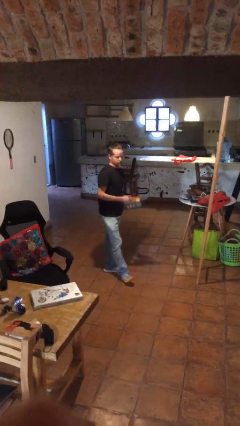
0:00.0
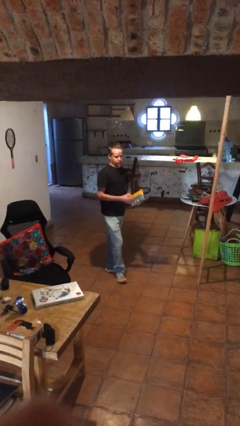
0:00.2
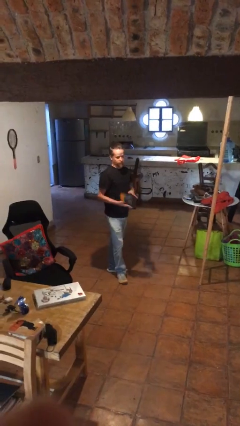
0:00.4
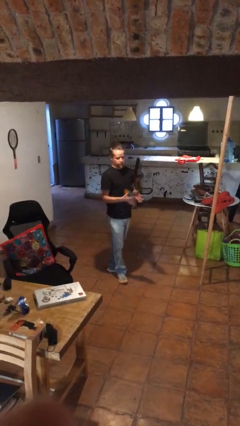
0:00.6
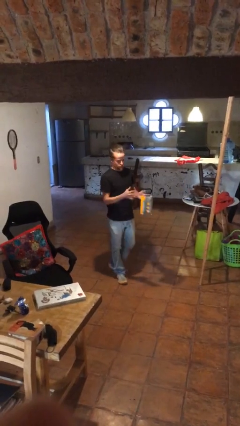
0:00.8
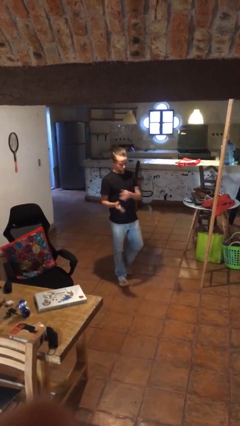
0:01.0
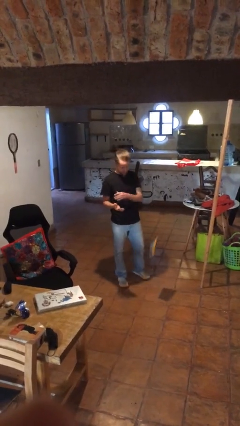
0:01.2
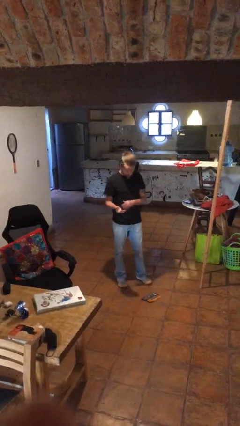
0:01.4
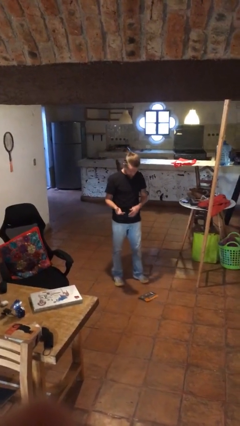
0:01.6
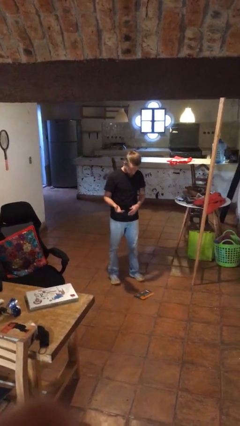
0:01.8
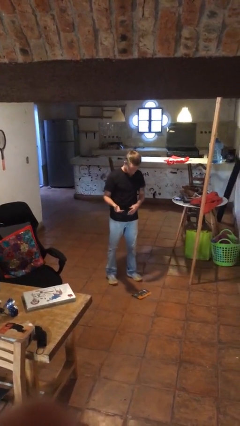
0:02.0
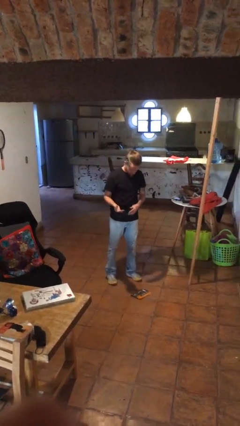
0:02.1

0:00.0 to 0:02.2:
person drops object

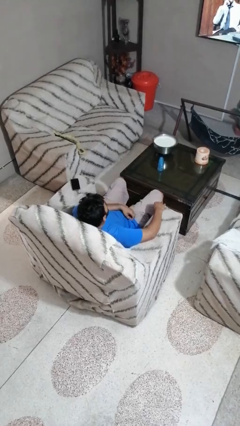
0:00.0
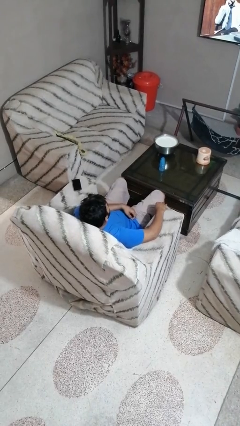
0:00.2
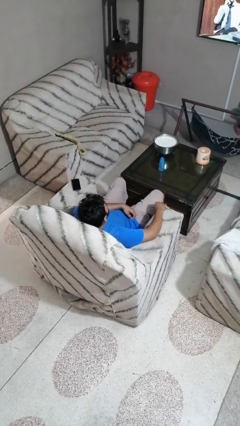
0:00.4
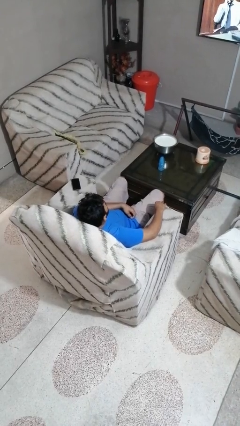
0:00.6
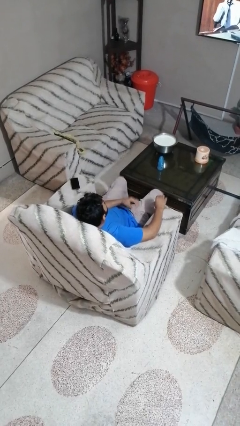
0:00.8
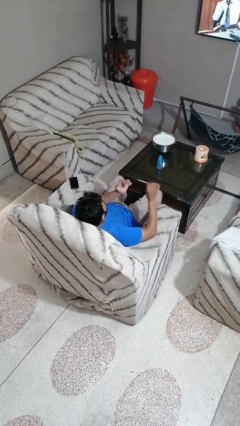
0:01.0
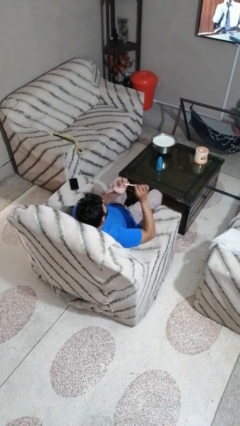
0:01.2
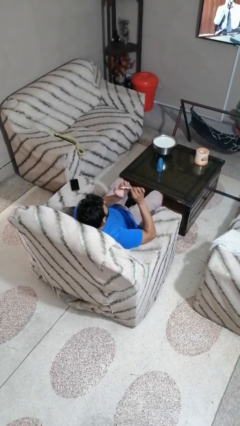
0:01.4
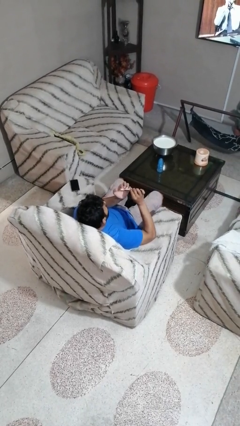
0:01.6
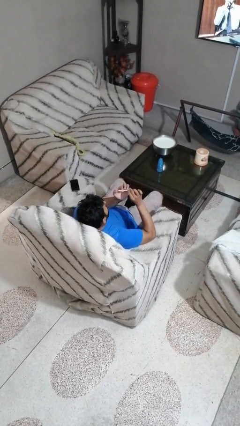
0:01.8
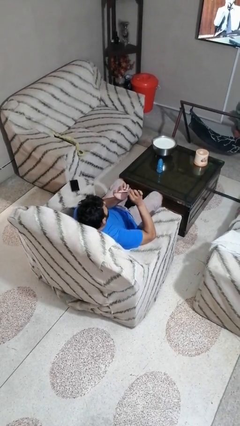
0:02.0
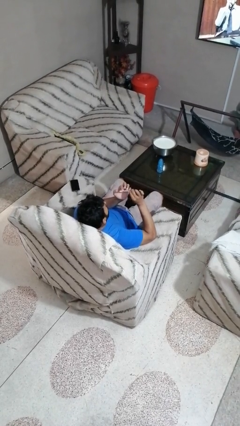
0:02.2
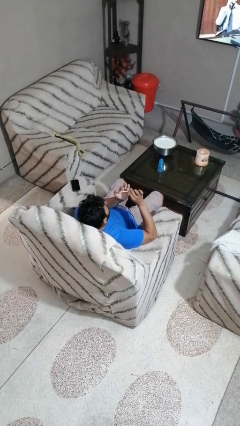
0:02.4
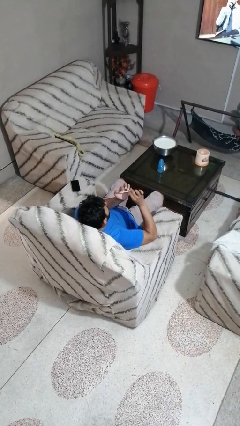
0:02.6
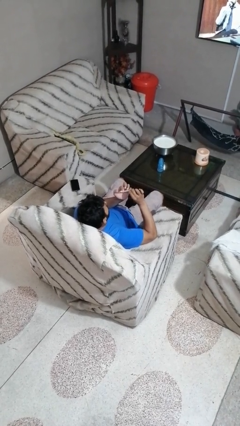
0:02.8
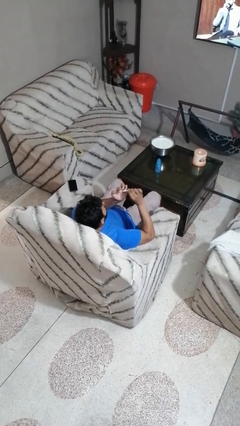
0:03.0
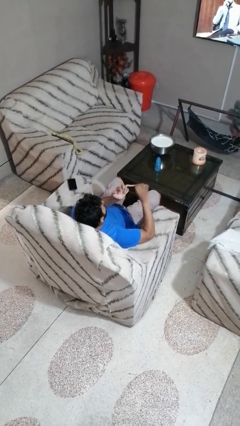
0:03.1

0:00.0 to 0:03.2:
person files fingernails

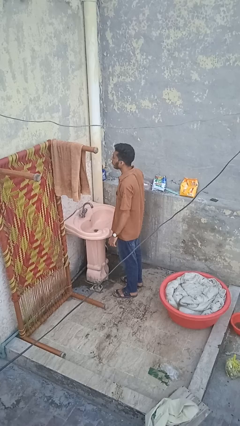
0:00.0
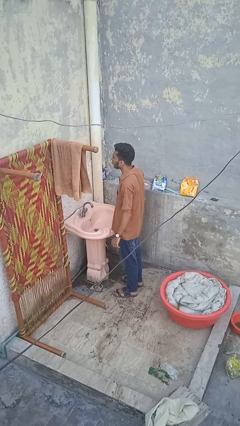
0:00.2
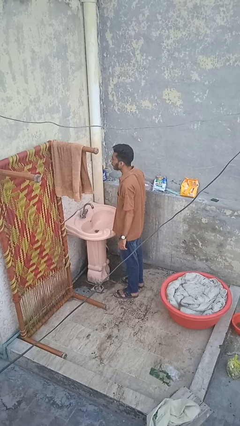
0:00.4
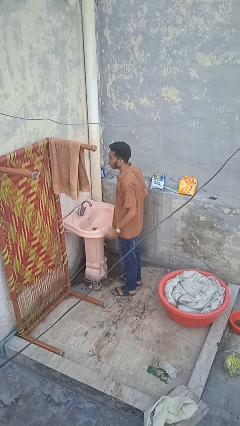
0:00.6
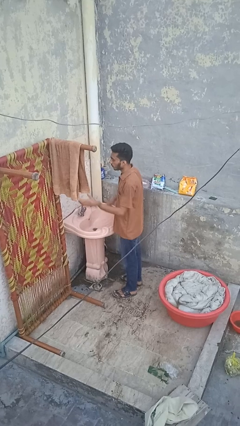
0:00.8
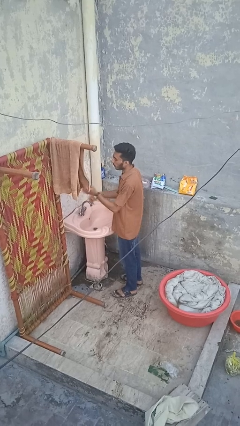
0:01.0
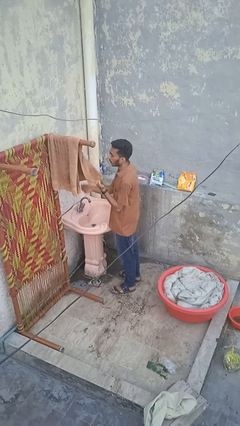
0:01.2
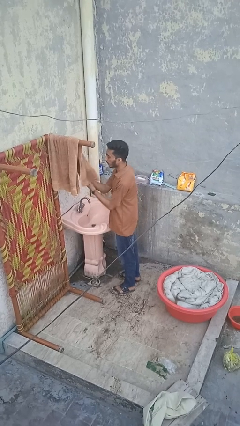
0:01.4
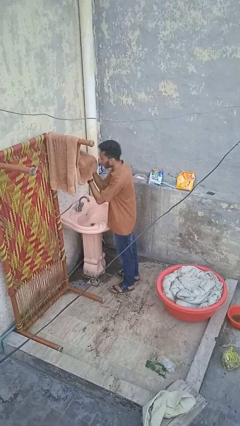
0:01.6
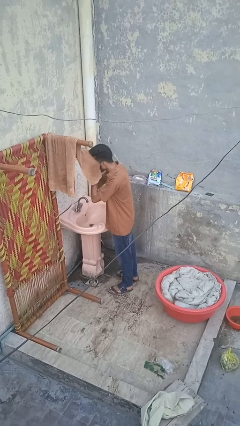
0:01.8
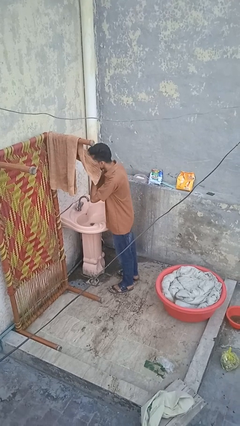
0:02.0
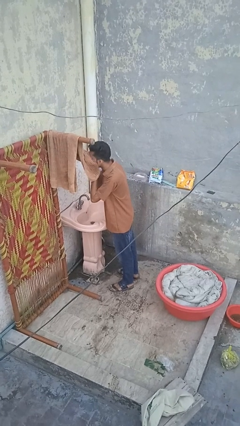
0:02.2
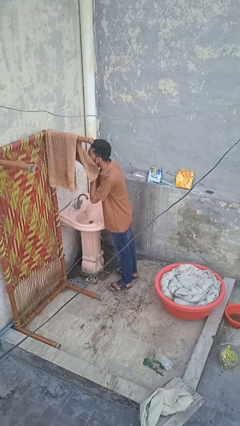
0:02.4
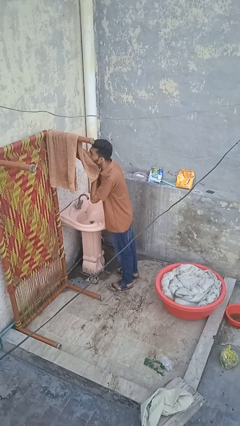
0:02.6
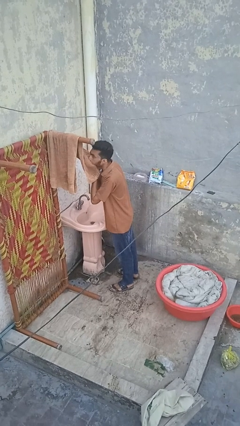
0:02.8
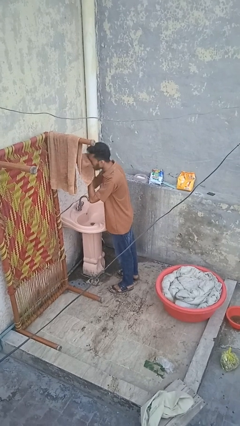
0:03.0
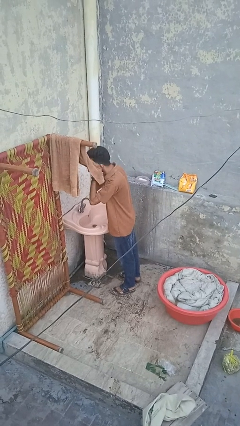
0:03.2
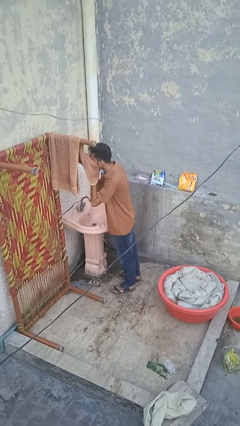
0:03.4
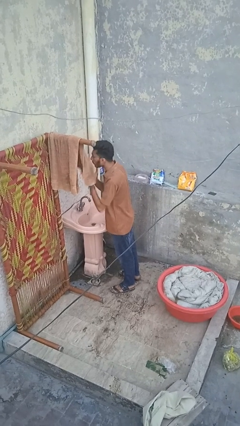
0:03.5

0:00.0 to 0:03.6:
person dries face with towel

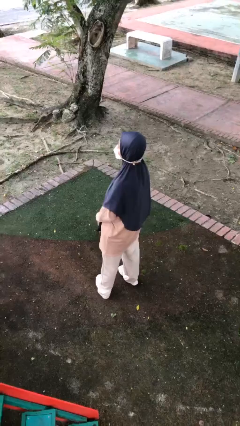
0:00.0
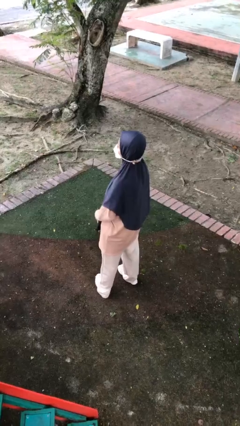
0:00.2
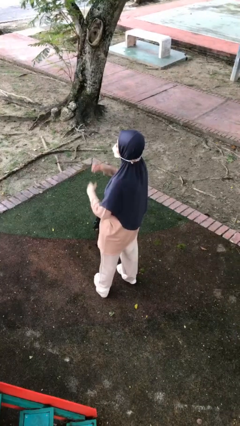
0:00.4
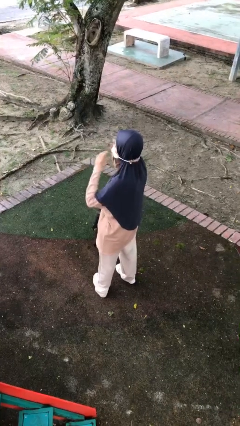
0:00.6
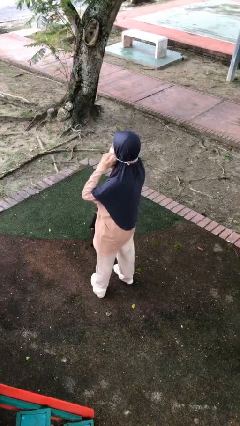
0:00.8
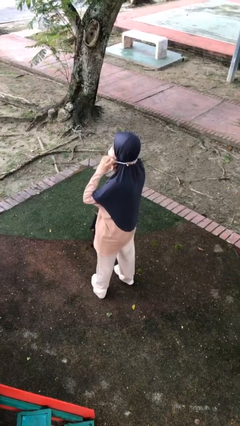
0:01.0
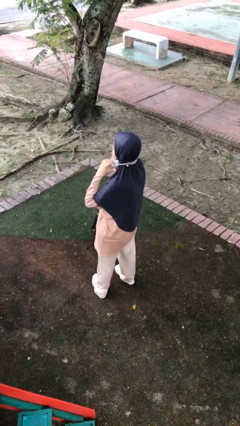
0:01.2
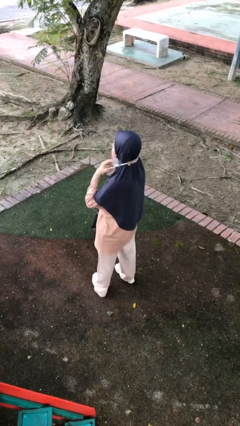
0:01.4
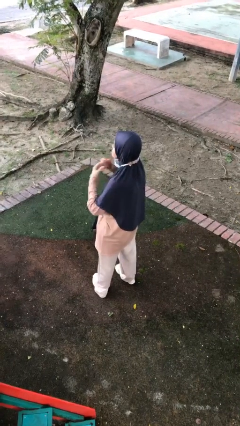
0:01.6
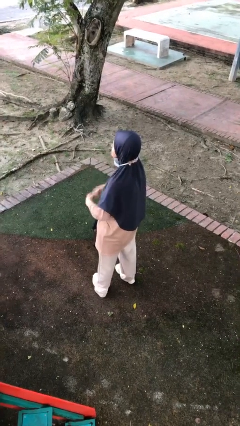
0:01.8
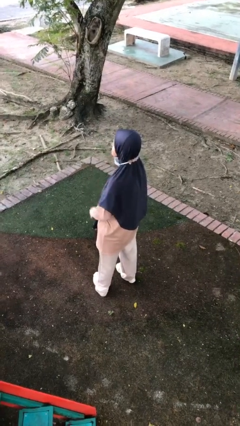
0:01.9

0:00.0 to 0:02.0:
person takes off facemask

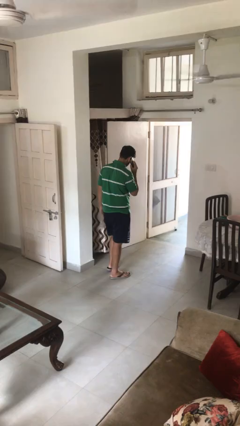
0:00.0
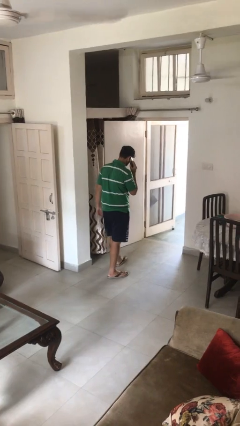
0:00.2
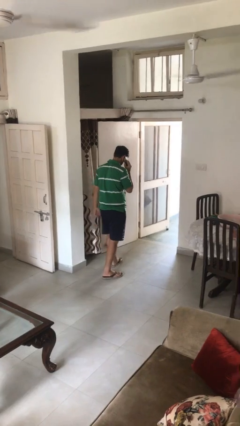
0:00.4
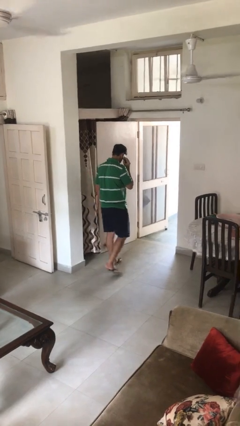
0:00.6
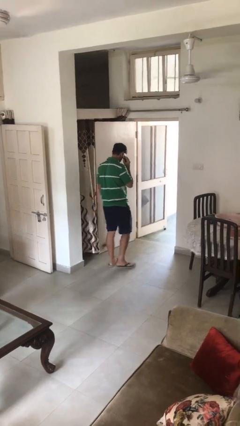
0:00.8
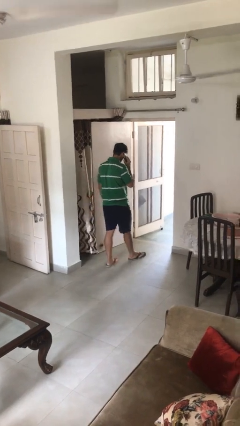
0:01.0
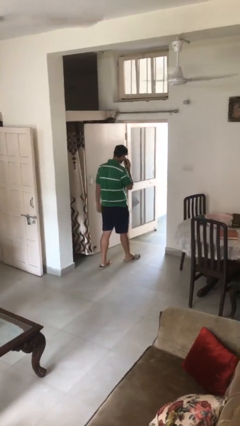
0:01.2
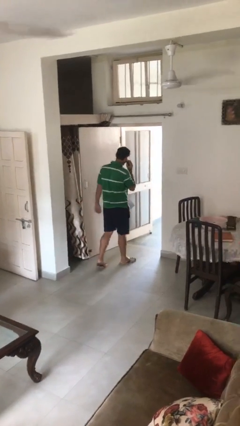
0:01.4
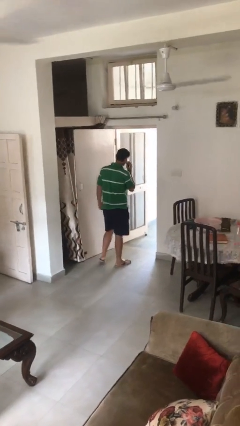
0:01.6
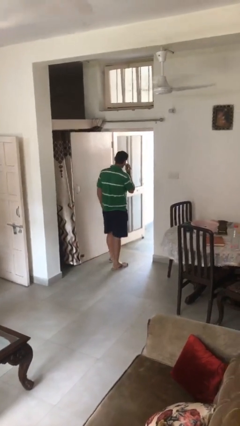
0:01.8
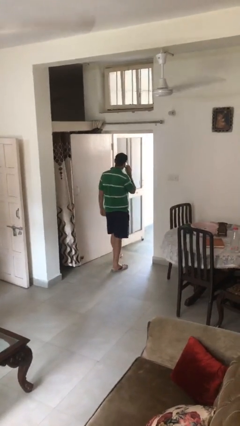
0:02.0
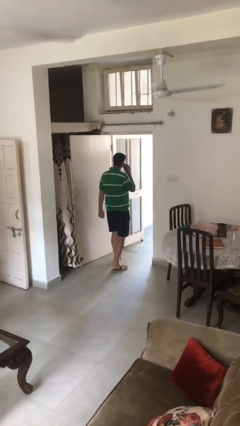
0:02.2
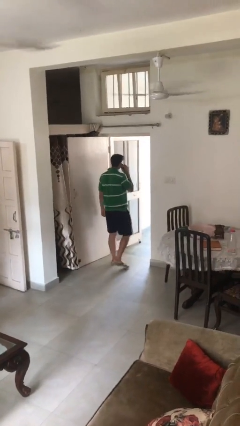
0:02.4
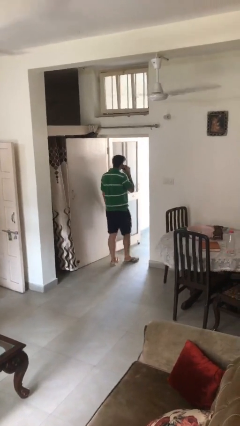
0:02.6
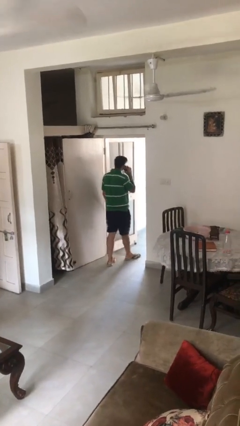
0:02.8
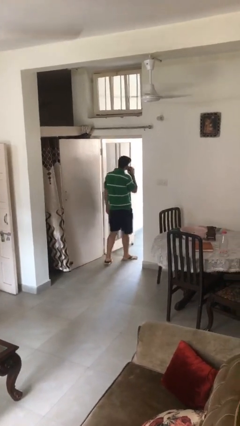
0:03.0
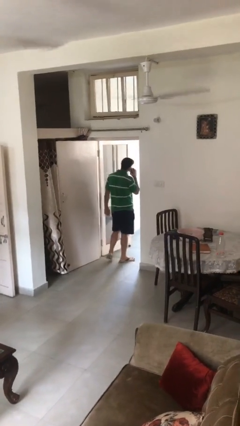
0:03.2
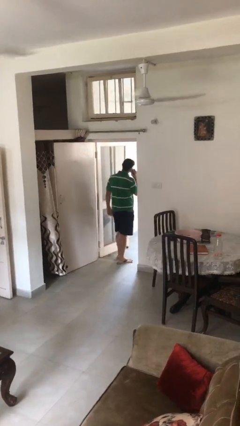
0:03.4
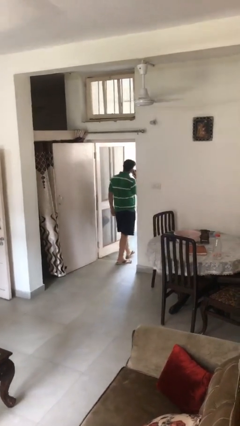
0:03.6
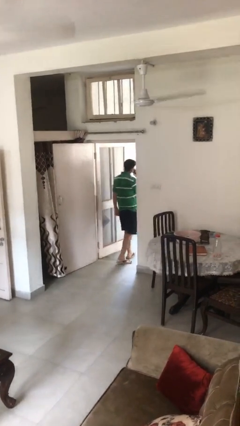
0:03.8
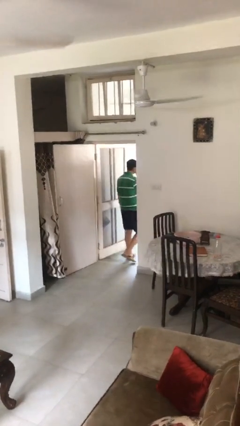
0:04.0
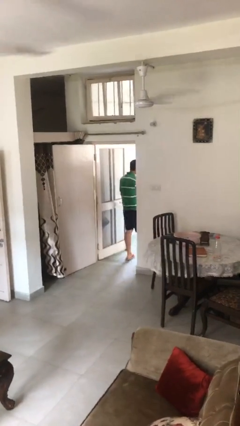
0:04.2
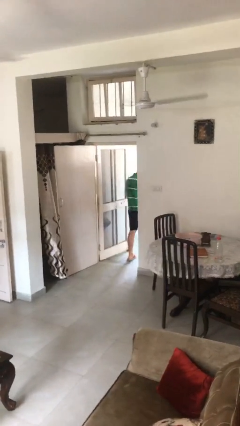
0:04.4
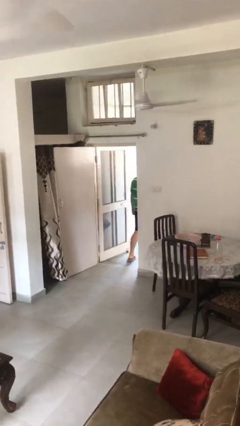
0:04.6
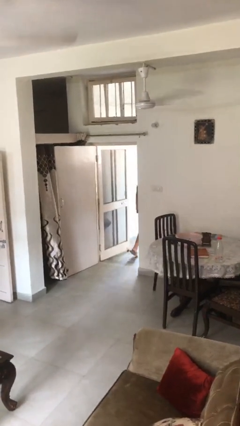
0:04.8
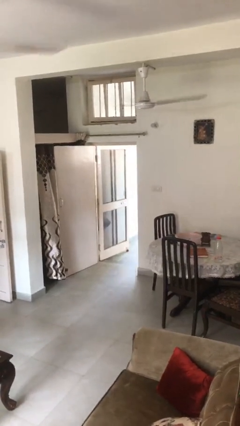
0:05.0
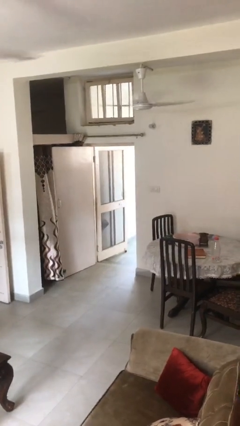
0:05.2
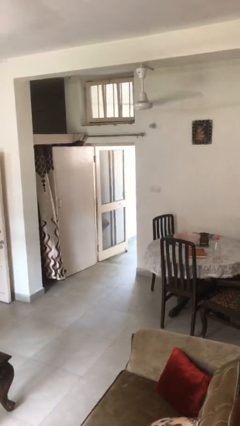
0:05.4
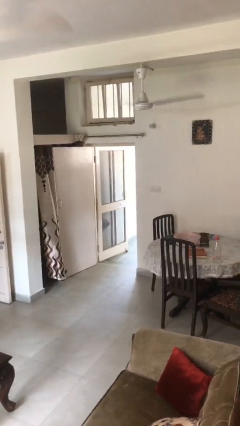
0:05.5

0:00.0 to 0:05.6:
person exits scene through structure

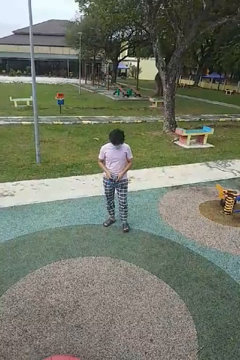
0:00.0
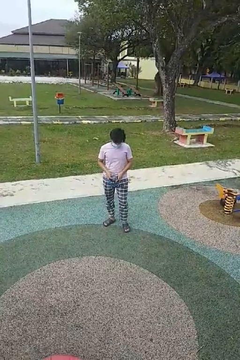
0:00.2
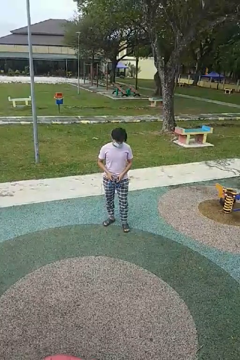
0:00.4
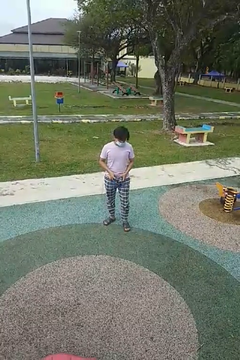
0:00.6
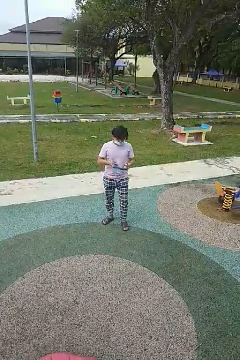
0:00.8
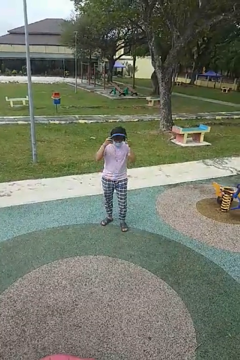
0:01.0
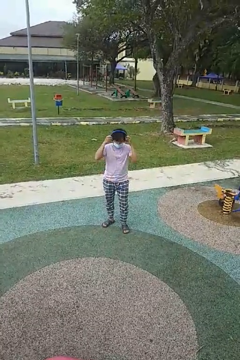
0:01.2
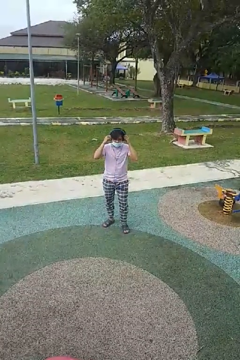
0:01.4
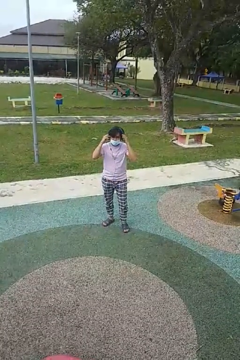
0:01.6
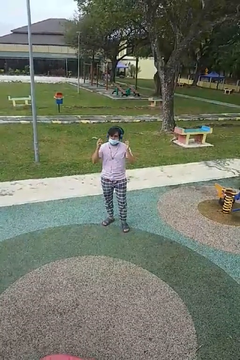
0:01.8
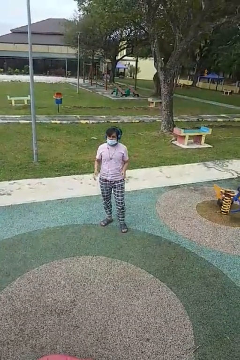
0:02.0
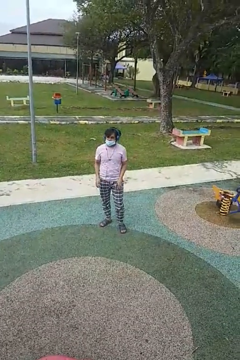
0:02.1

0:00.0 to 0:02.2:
person puts on headphones
